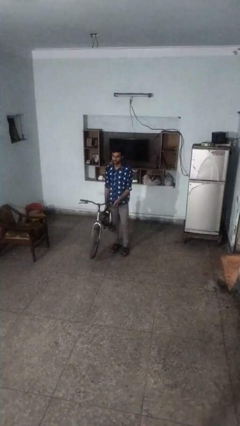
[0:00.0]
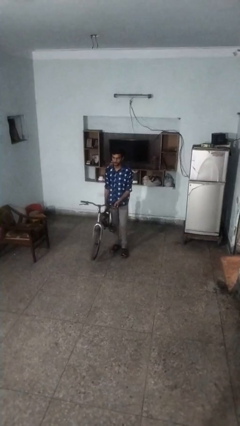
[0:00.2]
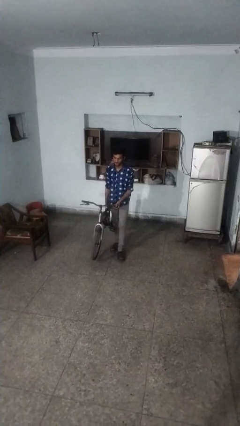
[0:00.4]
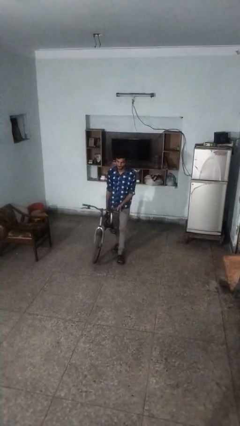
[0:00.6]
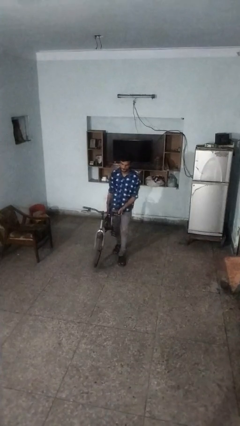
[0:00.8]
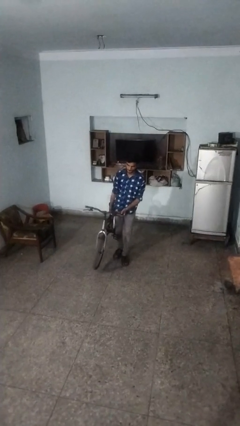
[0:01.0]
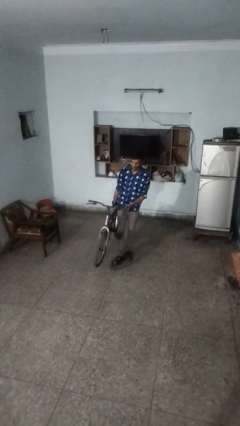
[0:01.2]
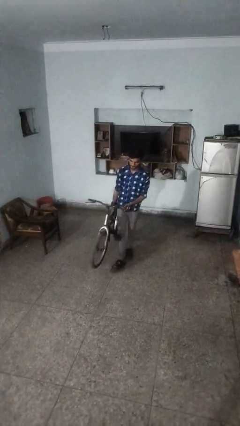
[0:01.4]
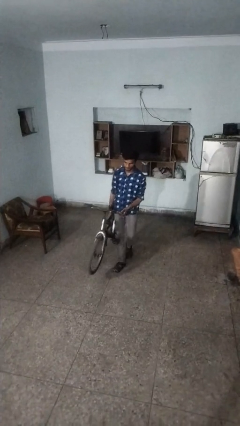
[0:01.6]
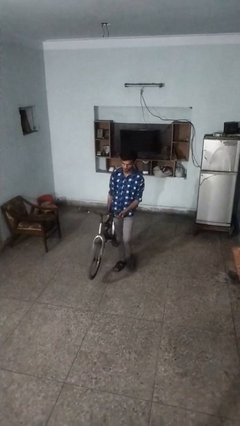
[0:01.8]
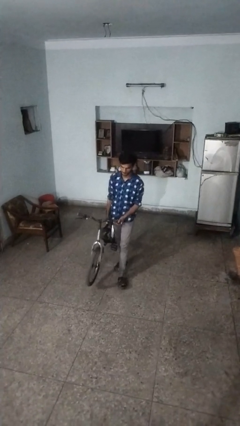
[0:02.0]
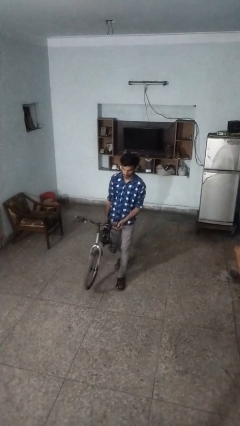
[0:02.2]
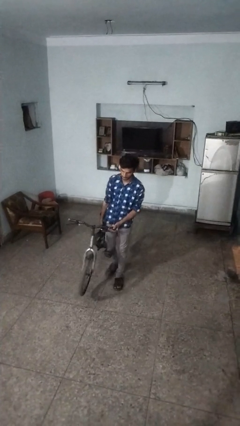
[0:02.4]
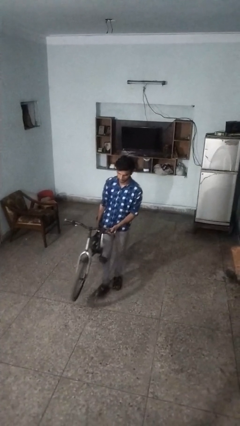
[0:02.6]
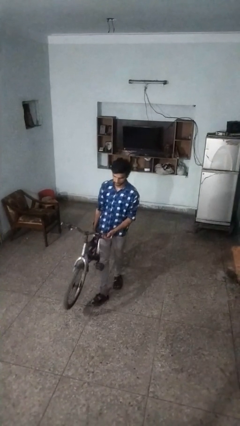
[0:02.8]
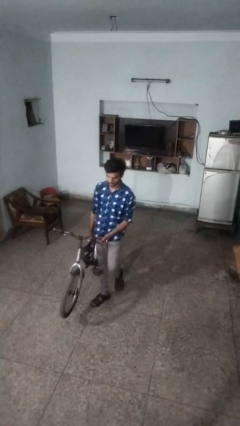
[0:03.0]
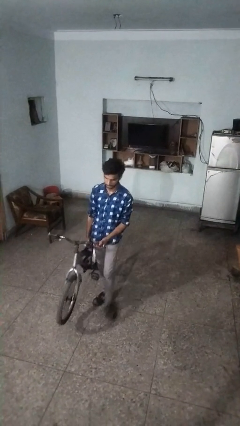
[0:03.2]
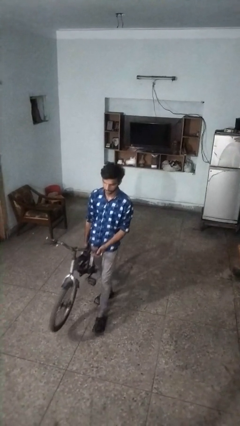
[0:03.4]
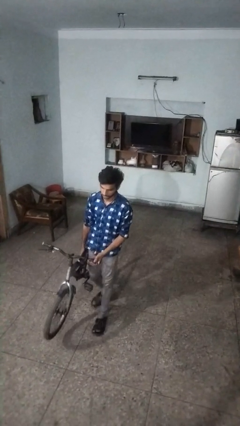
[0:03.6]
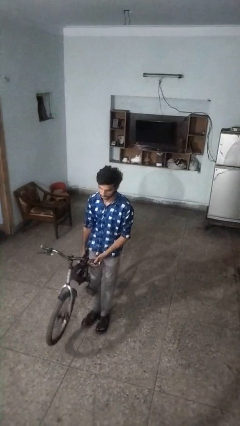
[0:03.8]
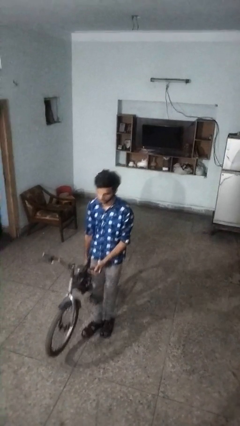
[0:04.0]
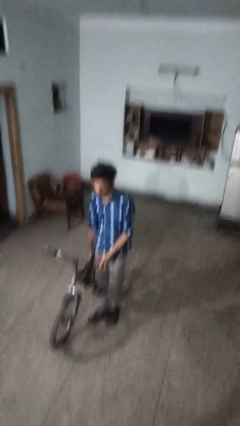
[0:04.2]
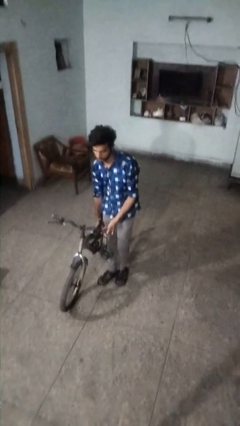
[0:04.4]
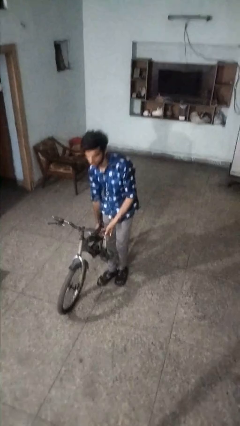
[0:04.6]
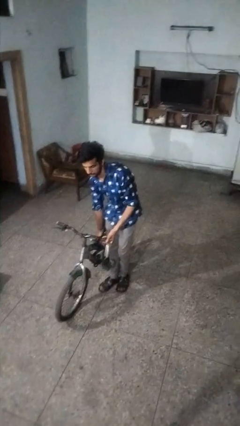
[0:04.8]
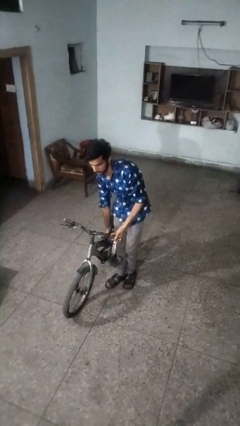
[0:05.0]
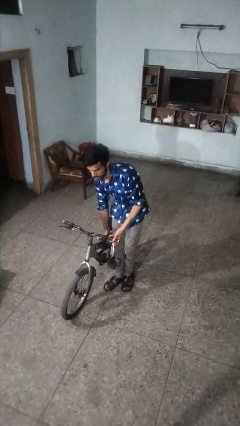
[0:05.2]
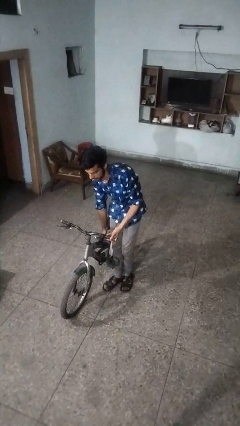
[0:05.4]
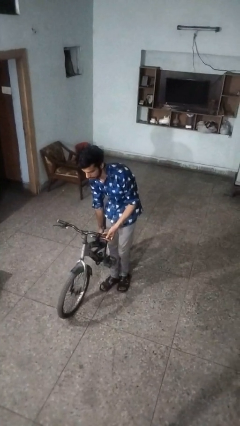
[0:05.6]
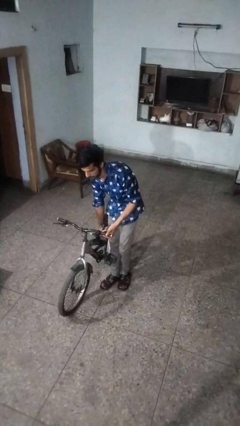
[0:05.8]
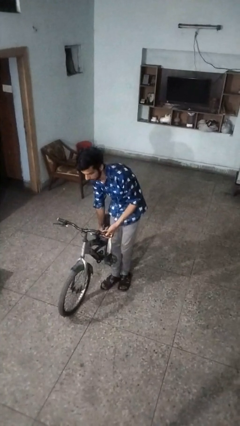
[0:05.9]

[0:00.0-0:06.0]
person carries bicycle

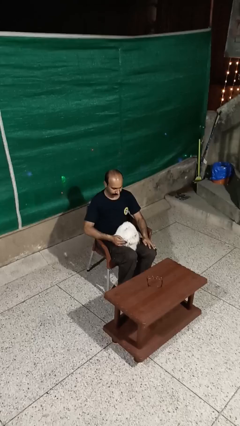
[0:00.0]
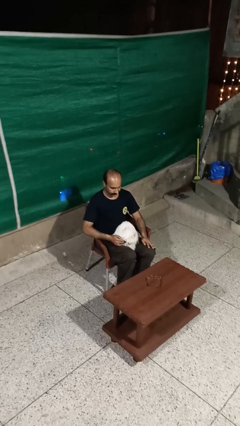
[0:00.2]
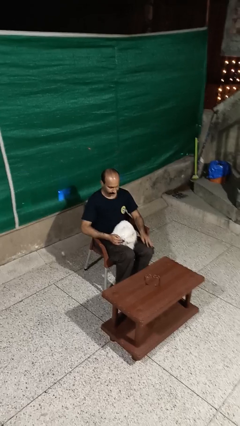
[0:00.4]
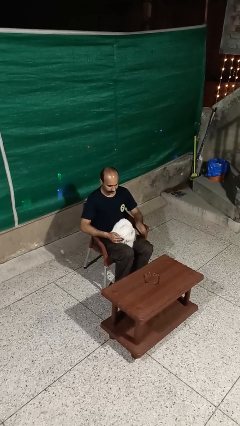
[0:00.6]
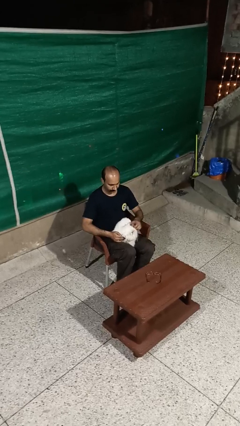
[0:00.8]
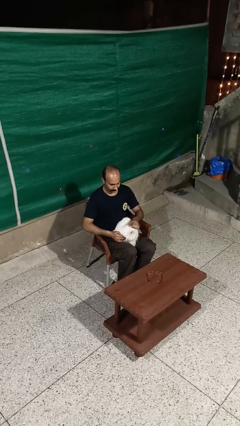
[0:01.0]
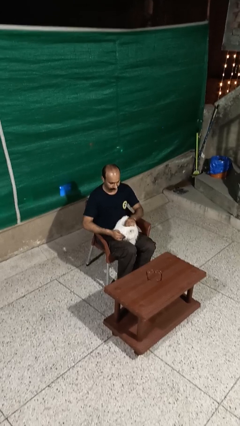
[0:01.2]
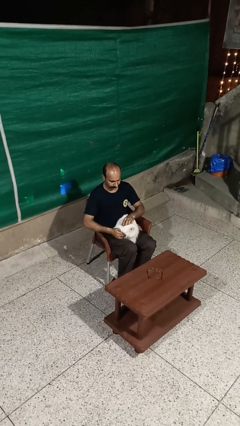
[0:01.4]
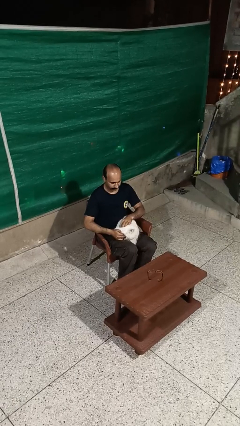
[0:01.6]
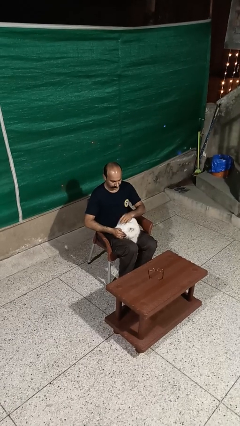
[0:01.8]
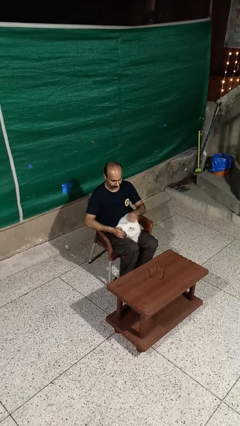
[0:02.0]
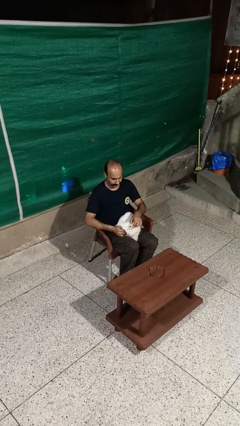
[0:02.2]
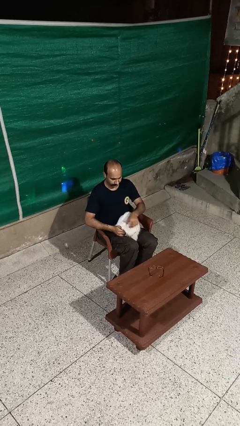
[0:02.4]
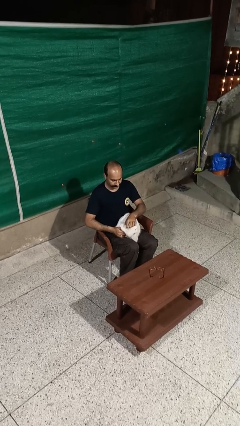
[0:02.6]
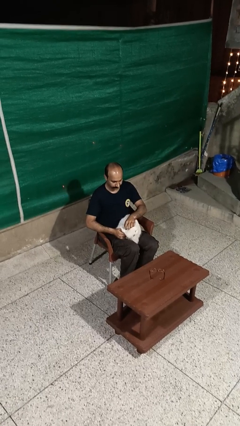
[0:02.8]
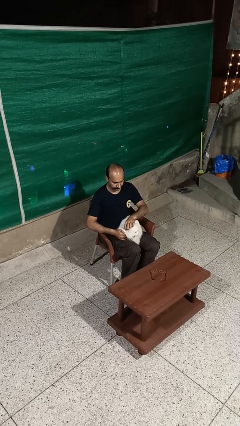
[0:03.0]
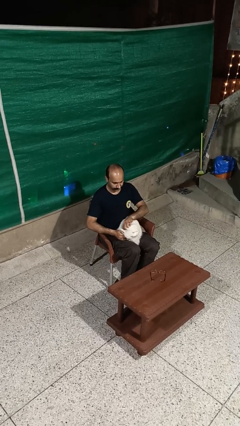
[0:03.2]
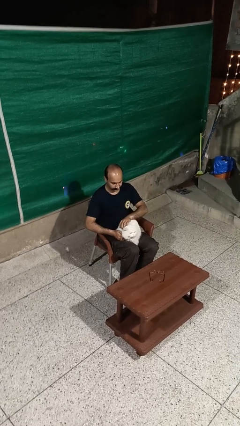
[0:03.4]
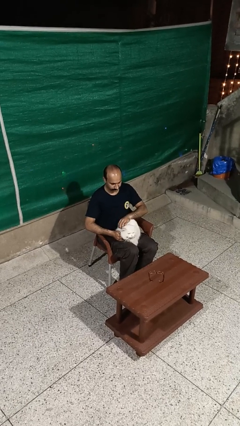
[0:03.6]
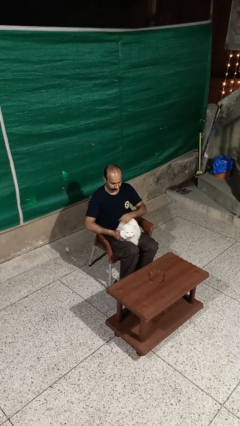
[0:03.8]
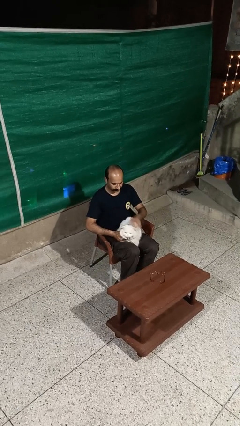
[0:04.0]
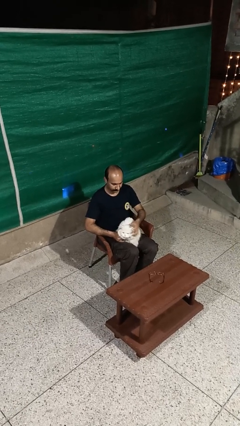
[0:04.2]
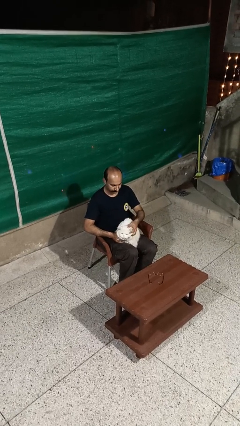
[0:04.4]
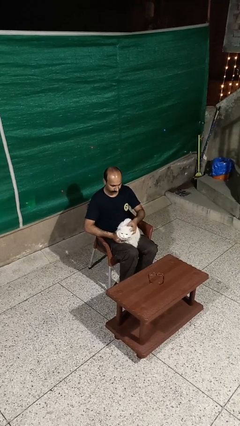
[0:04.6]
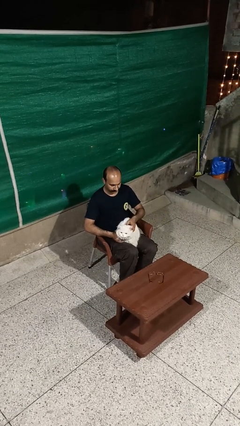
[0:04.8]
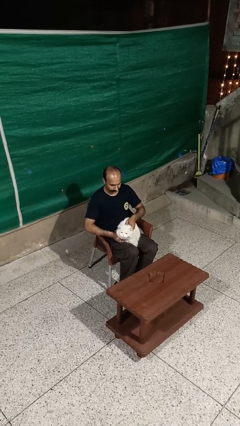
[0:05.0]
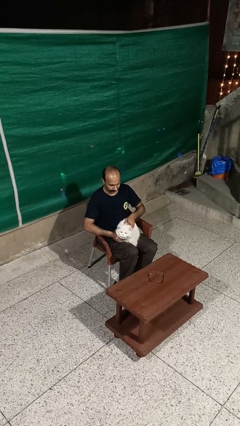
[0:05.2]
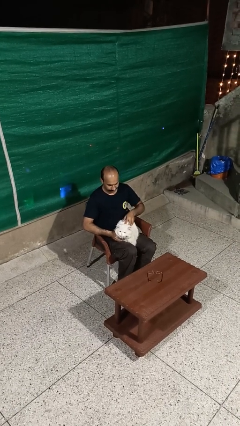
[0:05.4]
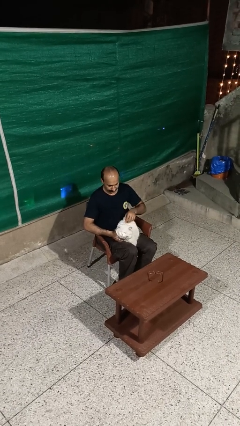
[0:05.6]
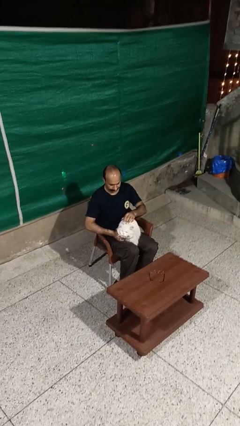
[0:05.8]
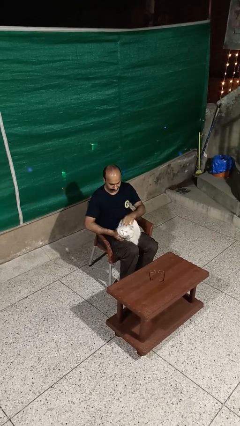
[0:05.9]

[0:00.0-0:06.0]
person pets cat

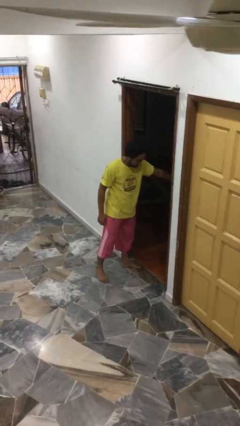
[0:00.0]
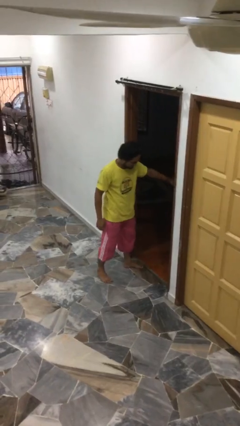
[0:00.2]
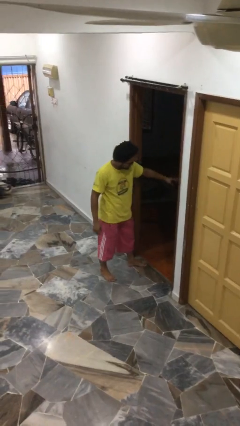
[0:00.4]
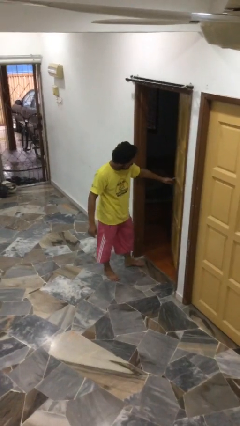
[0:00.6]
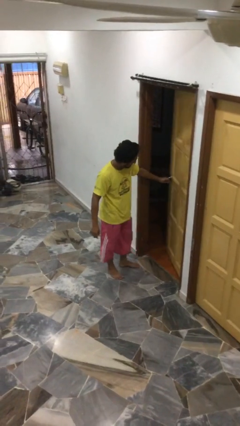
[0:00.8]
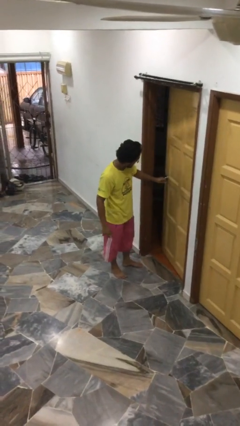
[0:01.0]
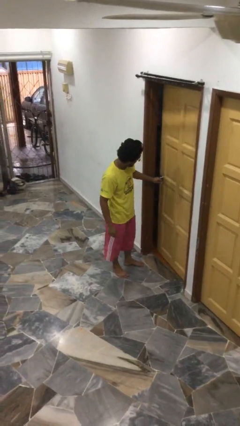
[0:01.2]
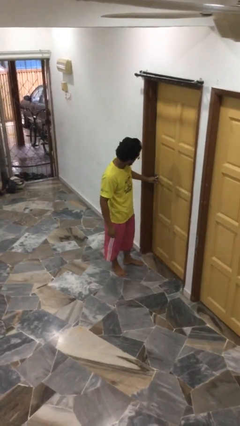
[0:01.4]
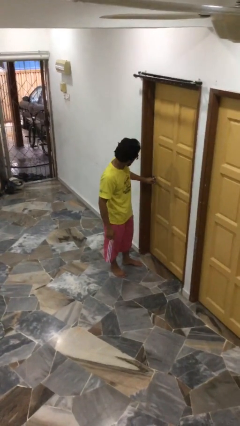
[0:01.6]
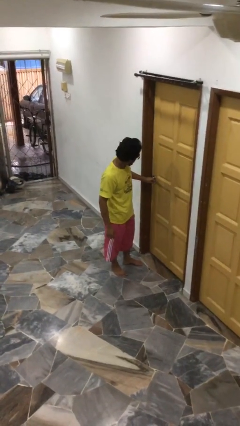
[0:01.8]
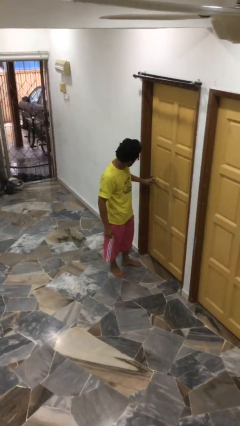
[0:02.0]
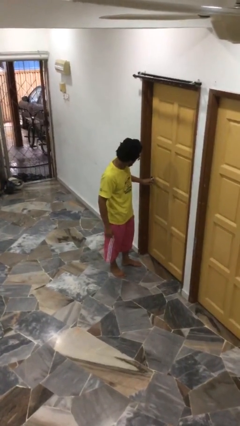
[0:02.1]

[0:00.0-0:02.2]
person closes facility door

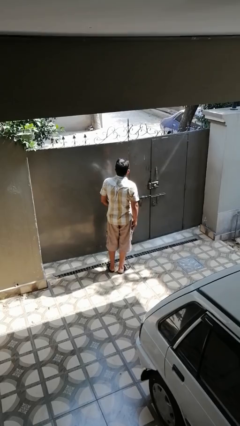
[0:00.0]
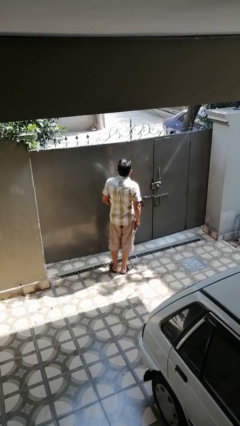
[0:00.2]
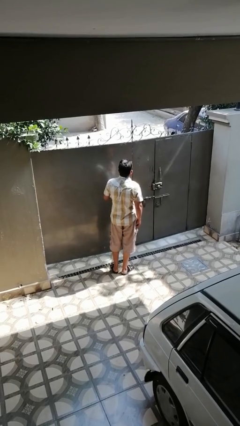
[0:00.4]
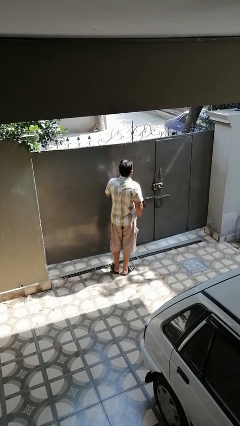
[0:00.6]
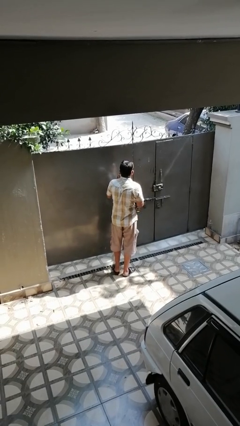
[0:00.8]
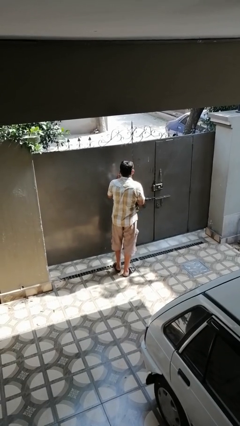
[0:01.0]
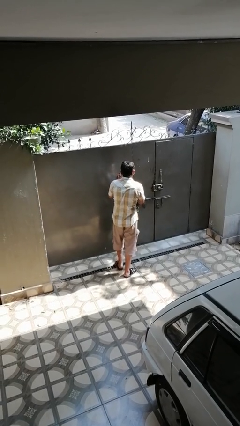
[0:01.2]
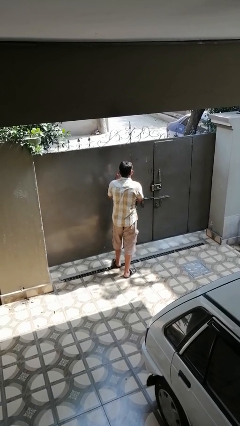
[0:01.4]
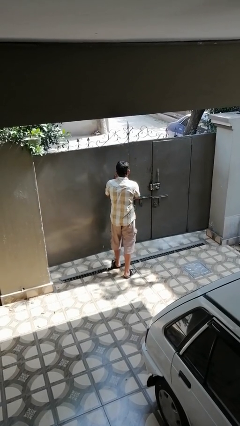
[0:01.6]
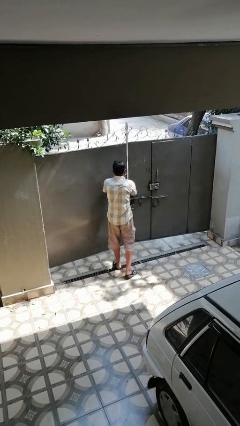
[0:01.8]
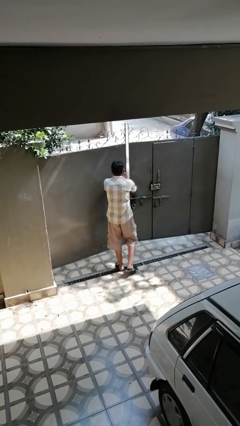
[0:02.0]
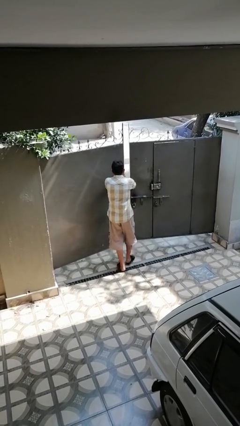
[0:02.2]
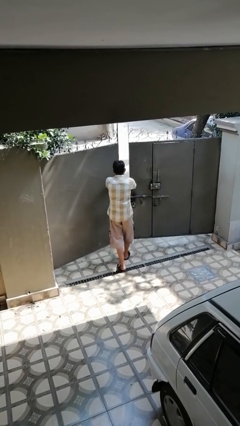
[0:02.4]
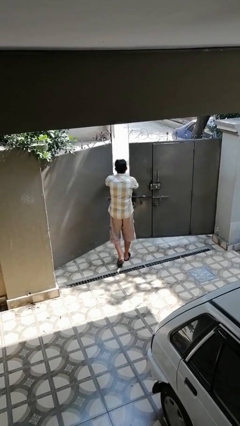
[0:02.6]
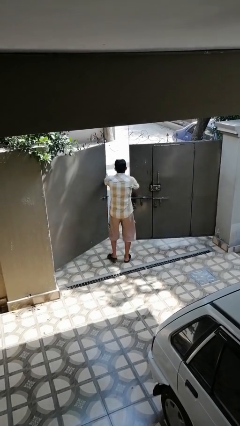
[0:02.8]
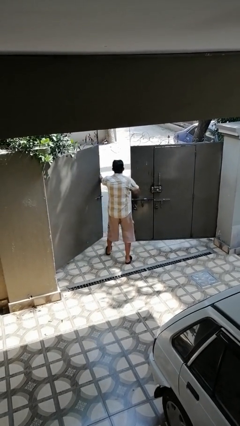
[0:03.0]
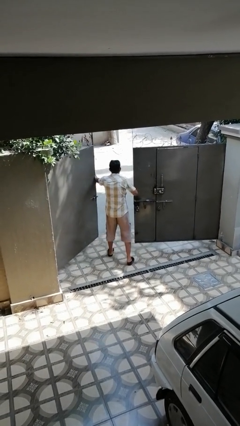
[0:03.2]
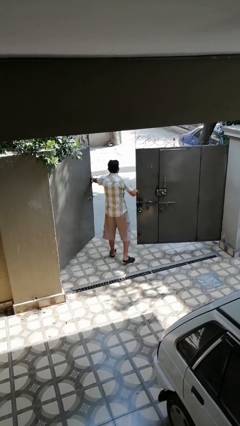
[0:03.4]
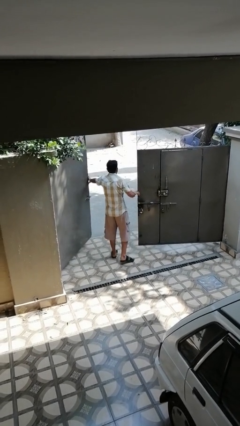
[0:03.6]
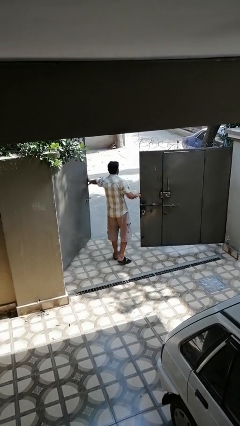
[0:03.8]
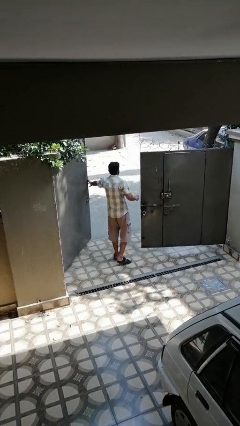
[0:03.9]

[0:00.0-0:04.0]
person opens gate
